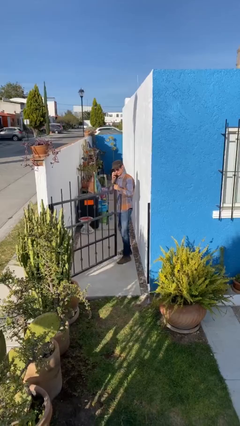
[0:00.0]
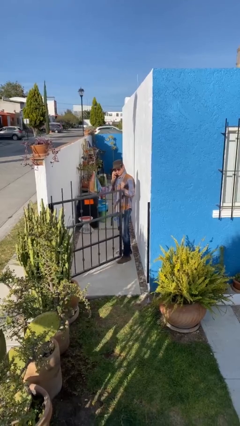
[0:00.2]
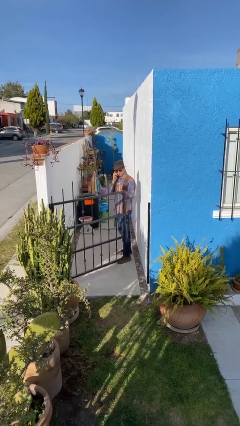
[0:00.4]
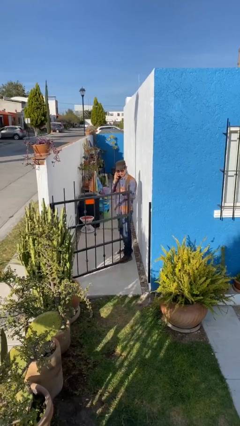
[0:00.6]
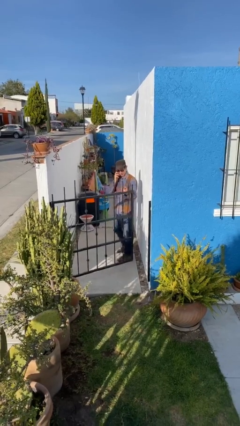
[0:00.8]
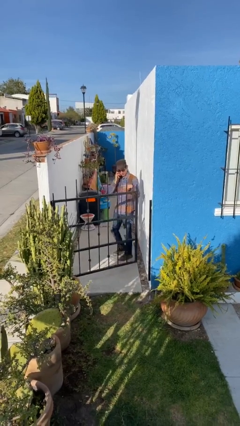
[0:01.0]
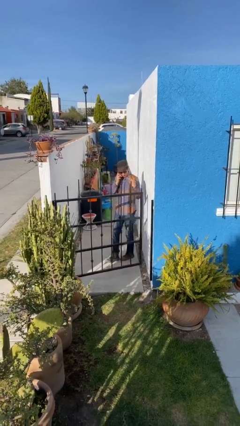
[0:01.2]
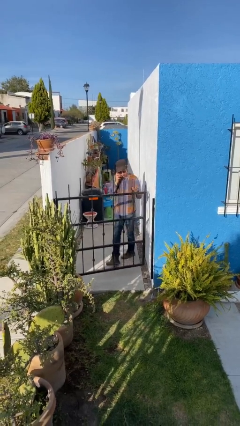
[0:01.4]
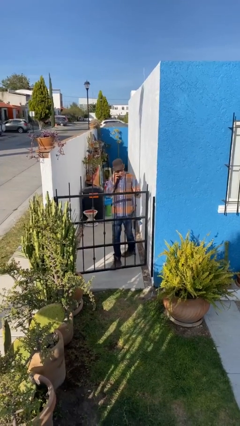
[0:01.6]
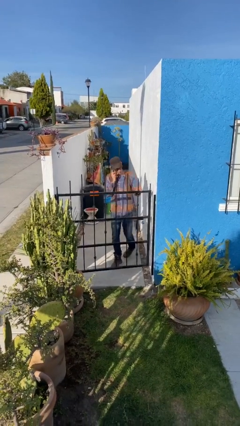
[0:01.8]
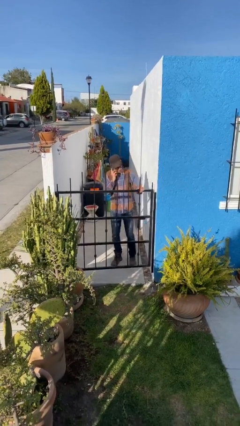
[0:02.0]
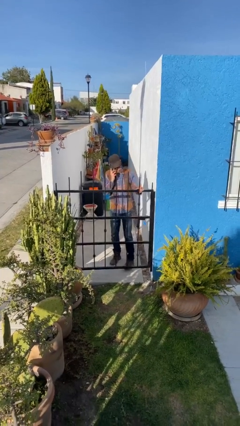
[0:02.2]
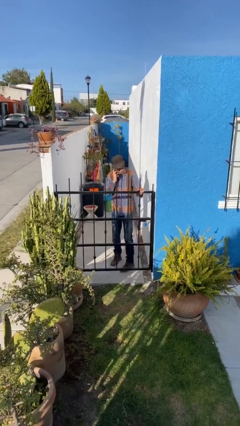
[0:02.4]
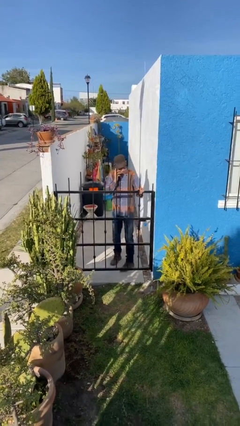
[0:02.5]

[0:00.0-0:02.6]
person closes facility door

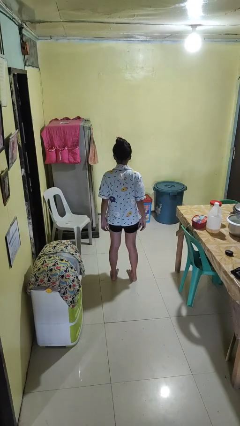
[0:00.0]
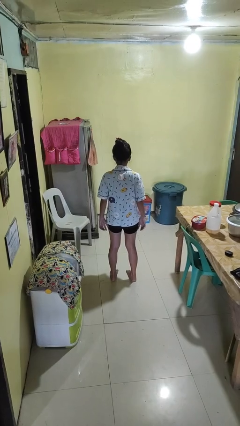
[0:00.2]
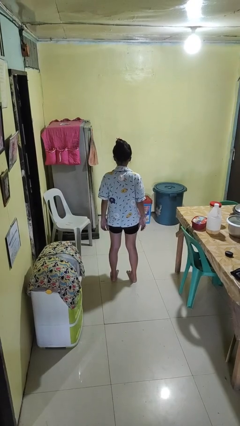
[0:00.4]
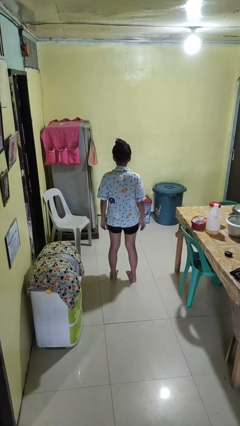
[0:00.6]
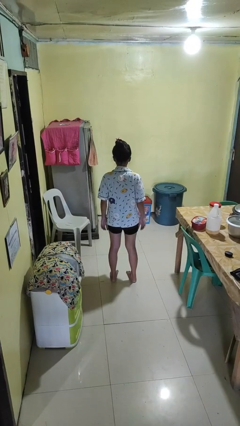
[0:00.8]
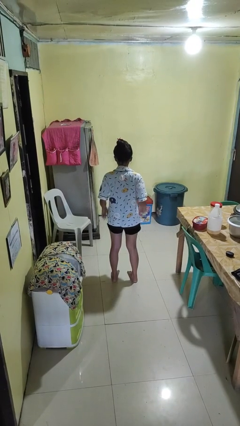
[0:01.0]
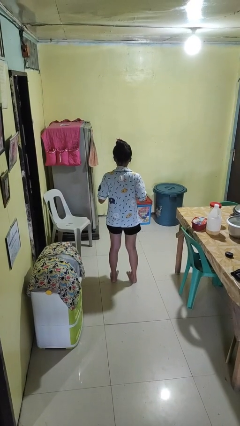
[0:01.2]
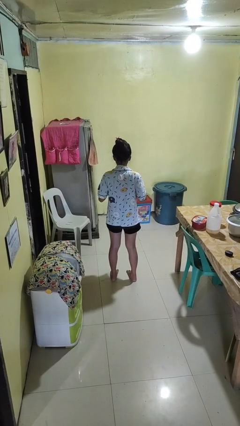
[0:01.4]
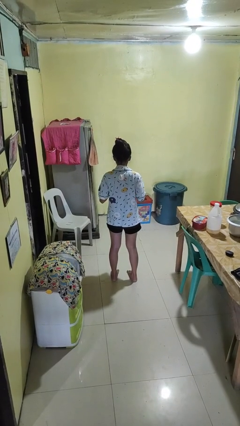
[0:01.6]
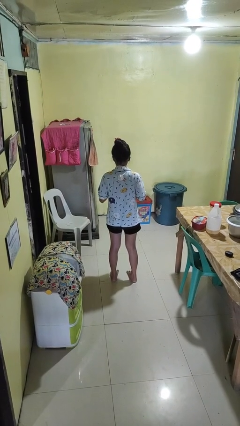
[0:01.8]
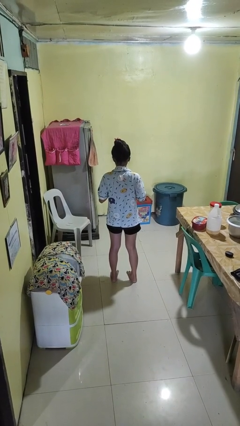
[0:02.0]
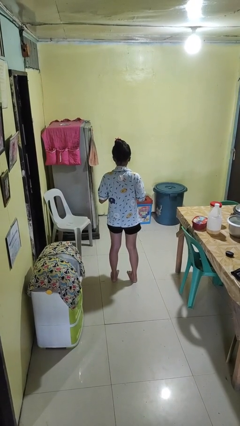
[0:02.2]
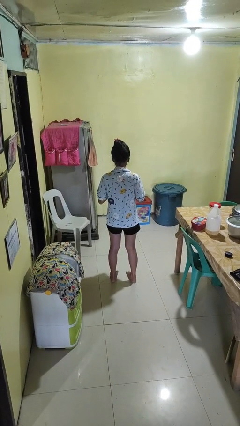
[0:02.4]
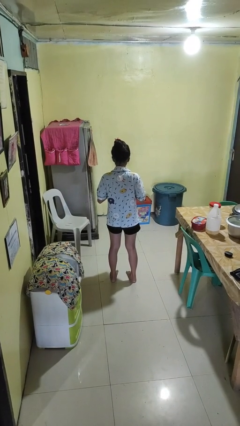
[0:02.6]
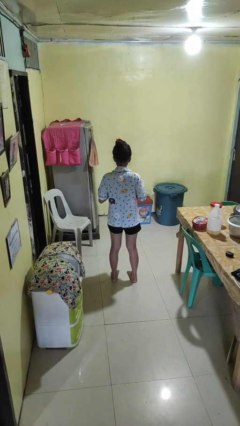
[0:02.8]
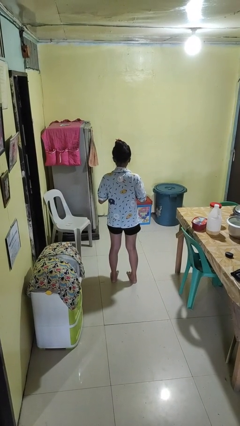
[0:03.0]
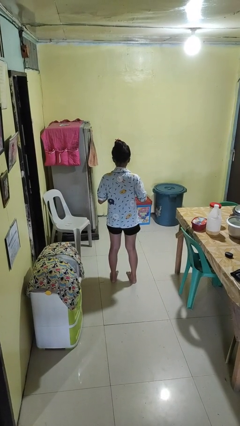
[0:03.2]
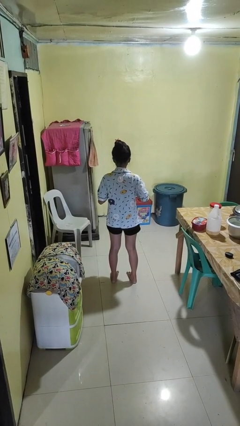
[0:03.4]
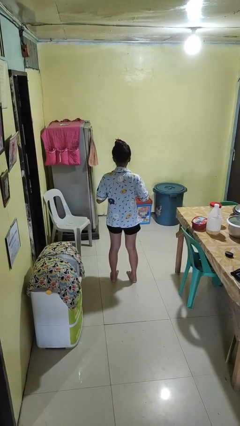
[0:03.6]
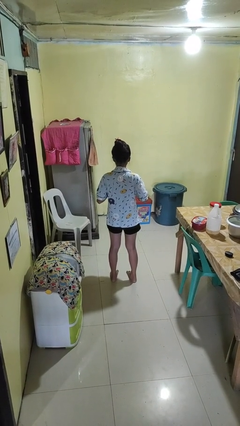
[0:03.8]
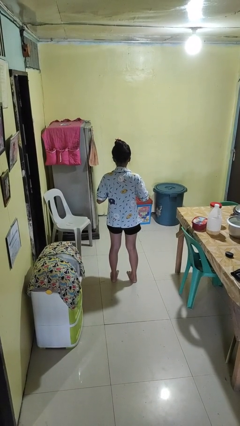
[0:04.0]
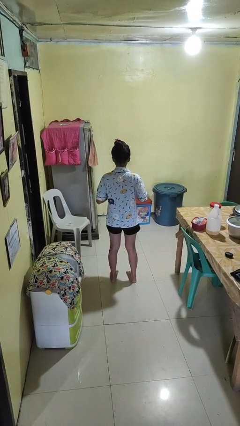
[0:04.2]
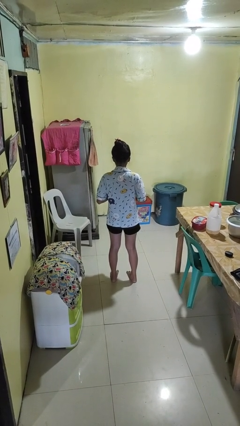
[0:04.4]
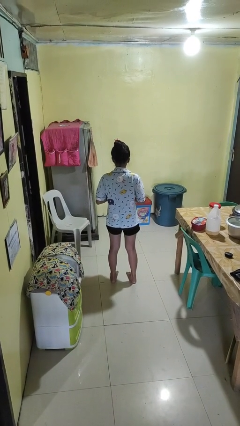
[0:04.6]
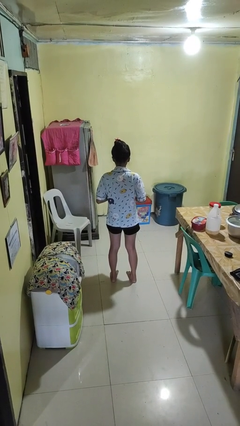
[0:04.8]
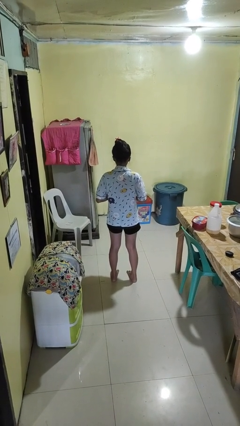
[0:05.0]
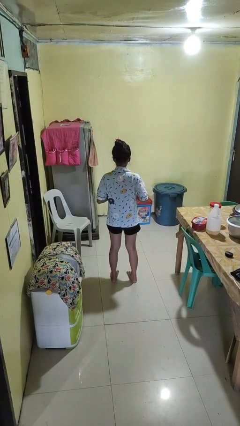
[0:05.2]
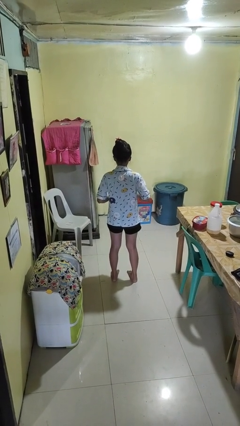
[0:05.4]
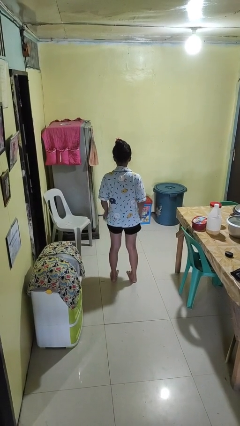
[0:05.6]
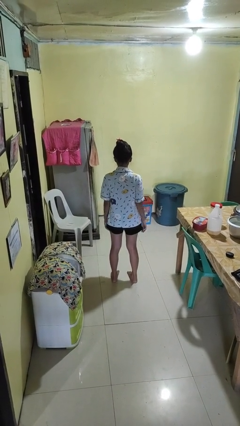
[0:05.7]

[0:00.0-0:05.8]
person buttons shirt

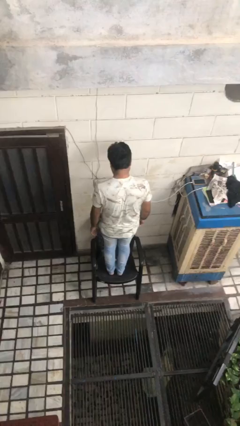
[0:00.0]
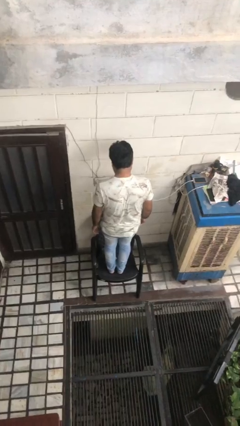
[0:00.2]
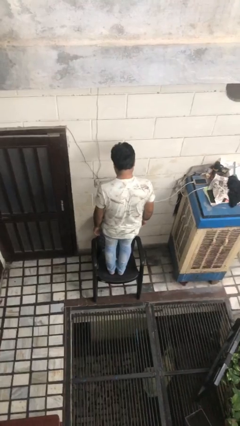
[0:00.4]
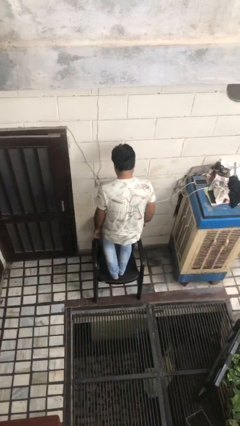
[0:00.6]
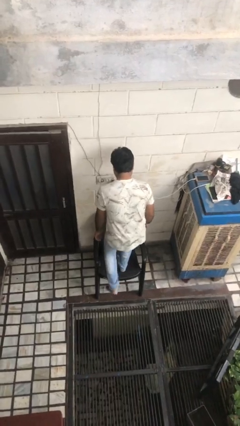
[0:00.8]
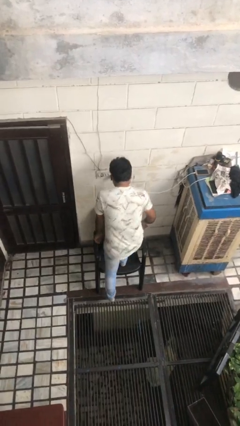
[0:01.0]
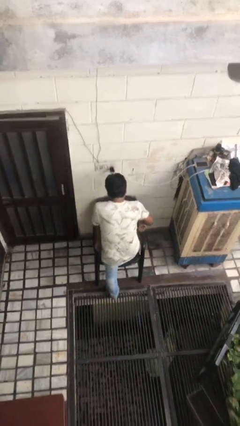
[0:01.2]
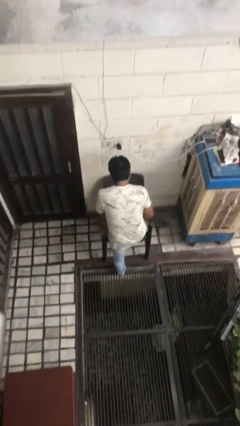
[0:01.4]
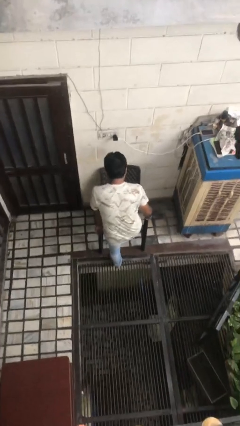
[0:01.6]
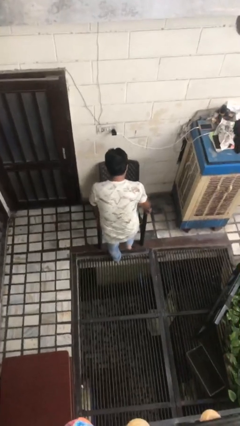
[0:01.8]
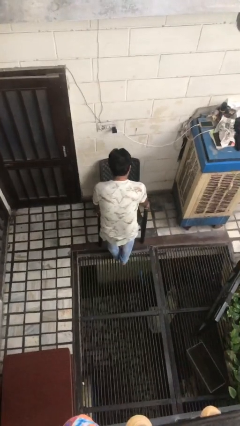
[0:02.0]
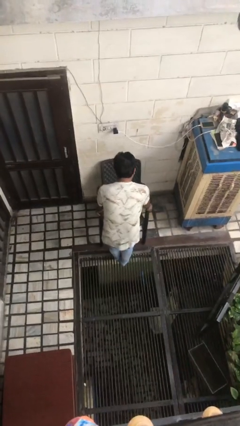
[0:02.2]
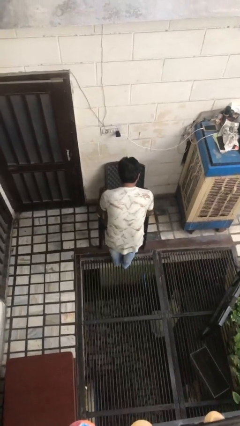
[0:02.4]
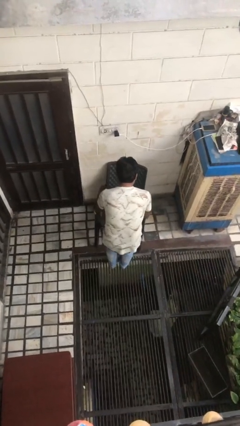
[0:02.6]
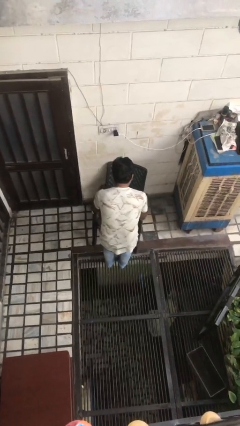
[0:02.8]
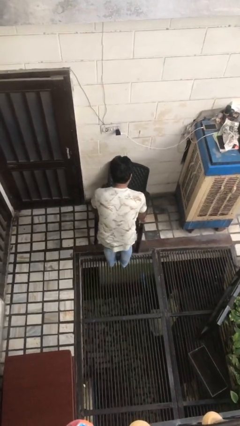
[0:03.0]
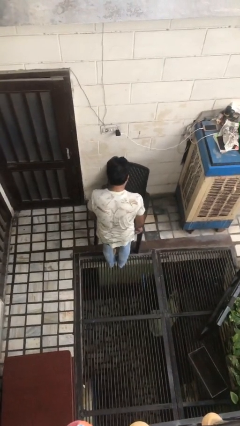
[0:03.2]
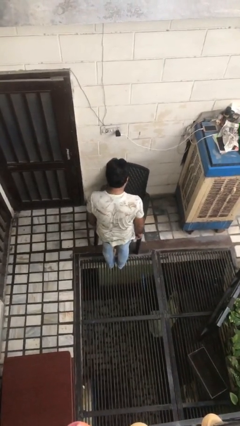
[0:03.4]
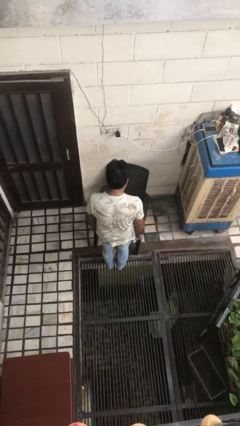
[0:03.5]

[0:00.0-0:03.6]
person climbs off chair

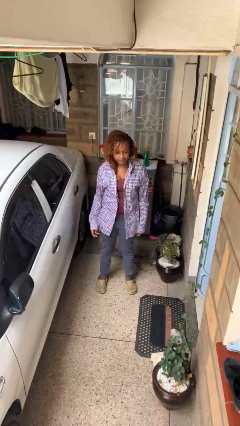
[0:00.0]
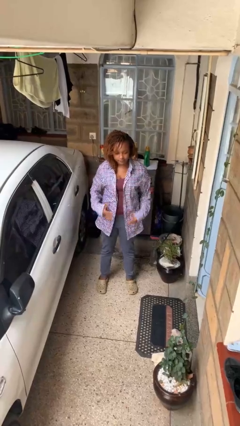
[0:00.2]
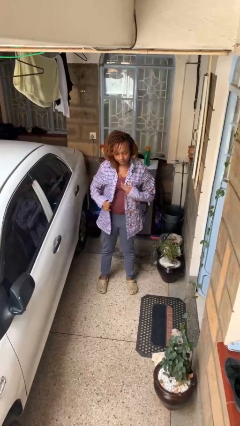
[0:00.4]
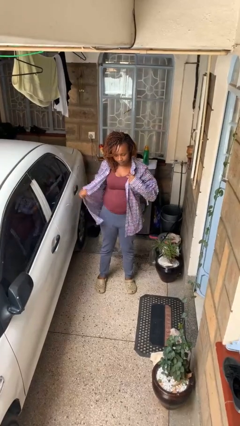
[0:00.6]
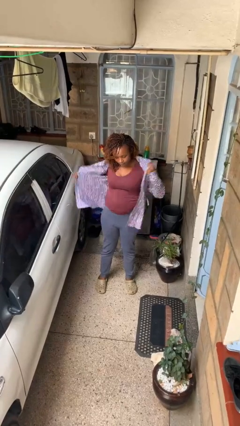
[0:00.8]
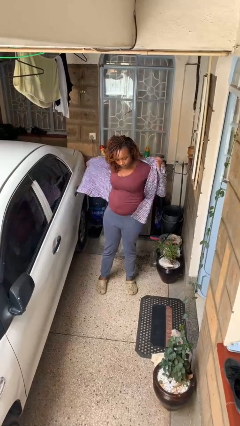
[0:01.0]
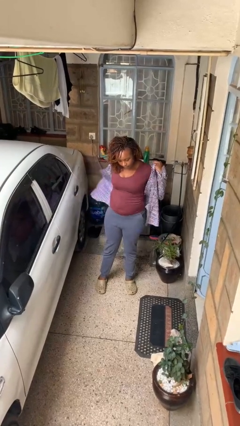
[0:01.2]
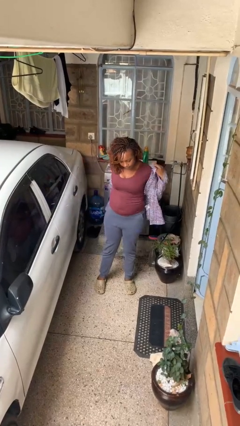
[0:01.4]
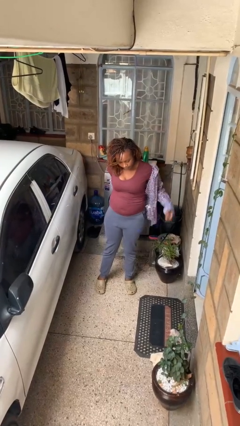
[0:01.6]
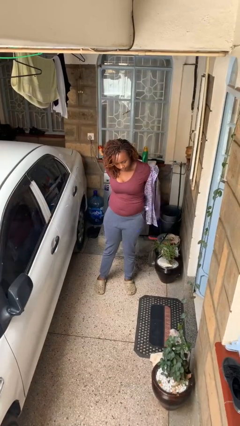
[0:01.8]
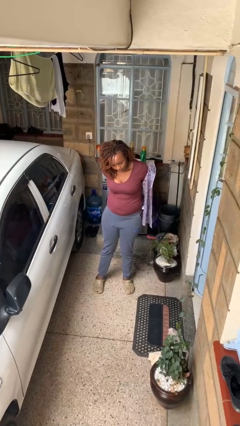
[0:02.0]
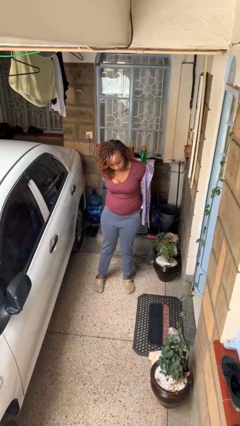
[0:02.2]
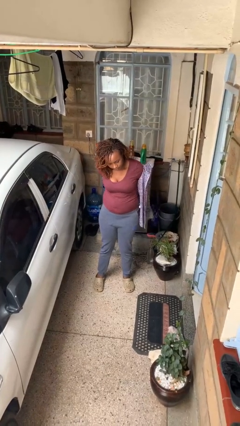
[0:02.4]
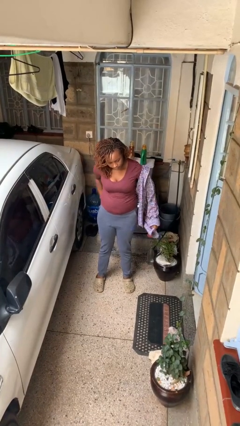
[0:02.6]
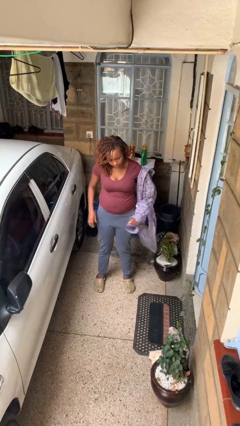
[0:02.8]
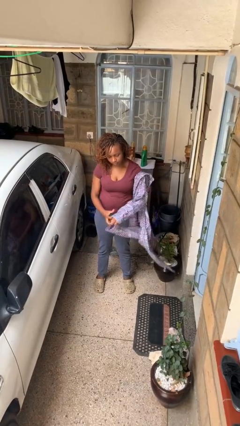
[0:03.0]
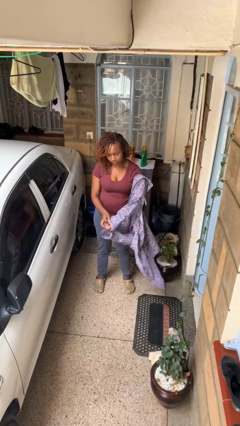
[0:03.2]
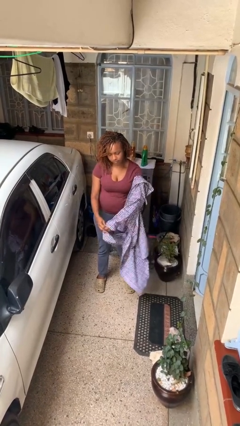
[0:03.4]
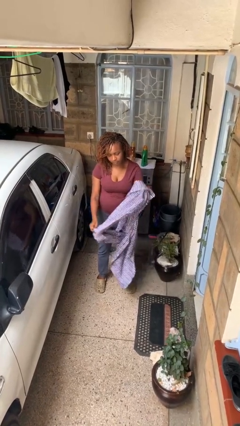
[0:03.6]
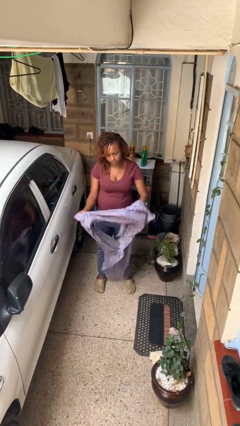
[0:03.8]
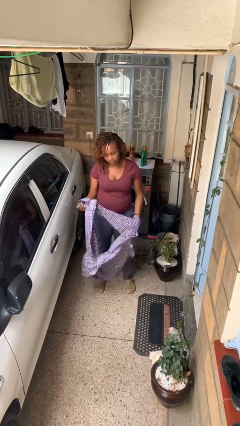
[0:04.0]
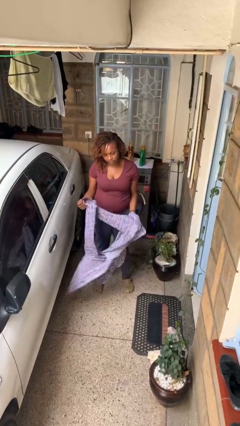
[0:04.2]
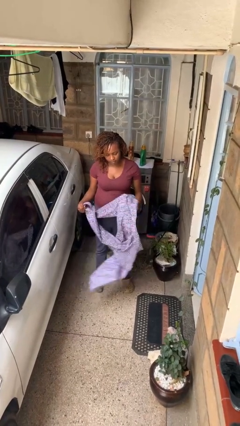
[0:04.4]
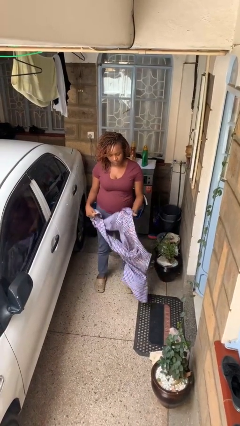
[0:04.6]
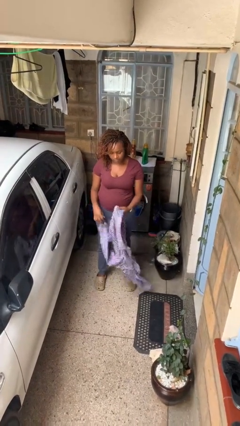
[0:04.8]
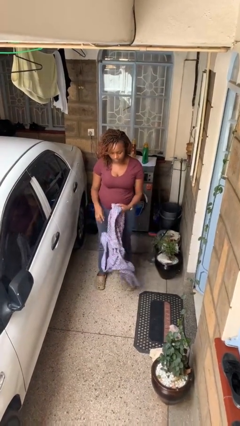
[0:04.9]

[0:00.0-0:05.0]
person takes off shirt

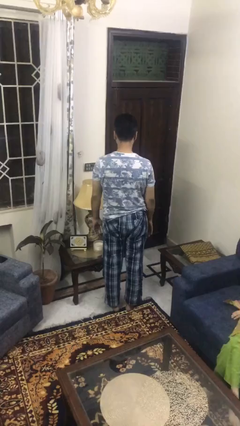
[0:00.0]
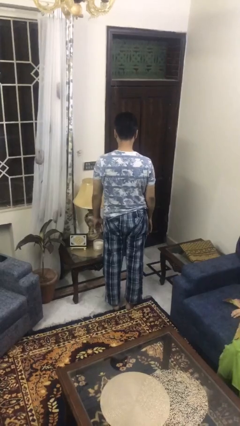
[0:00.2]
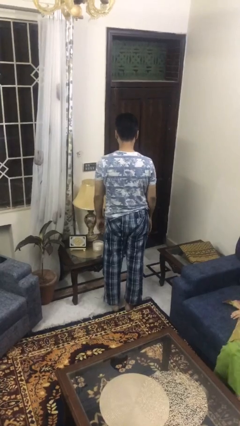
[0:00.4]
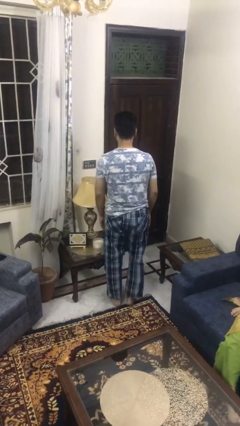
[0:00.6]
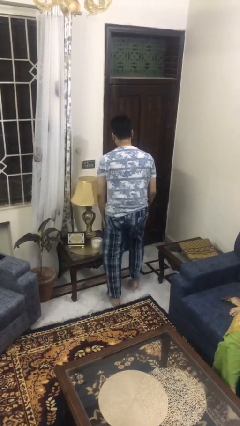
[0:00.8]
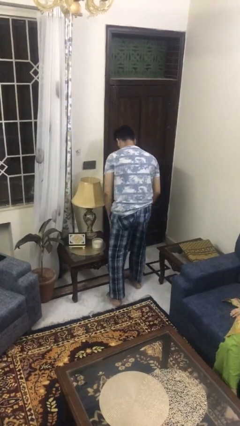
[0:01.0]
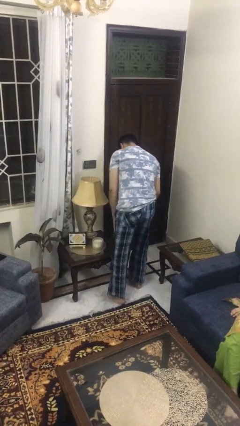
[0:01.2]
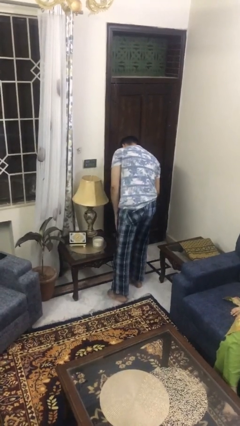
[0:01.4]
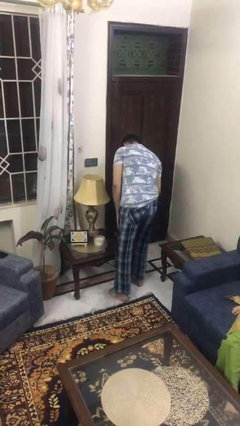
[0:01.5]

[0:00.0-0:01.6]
person bumps into table
